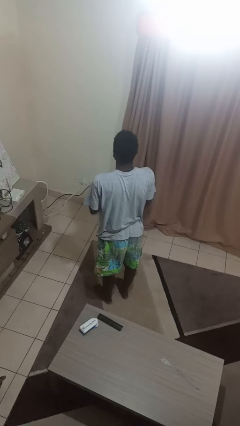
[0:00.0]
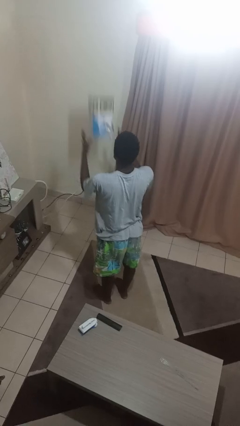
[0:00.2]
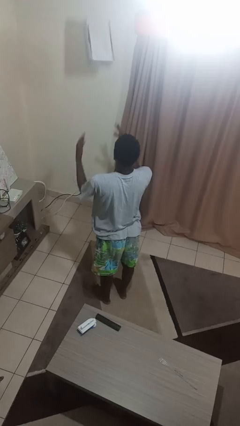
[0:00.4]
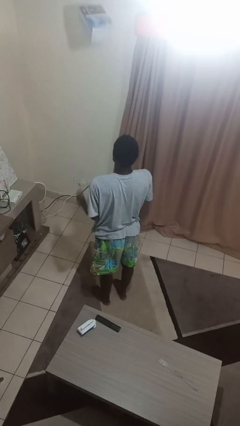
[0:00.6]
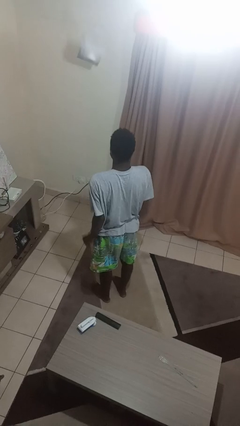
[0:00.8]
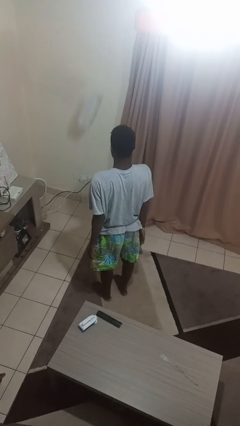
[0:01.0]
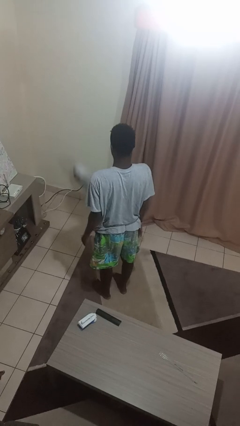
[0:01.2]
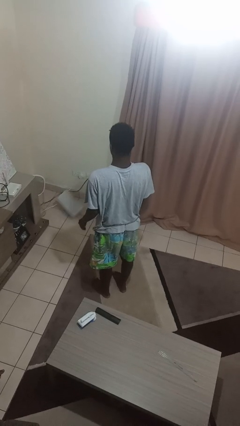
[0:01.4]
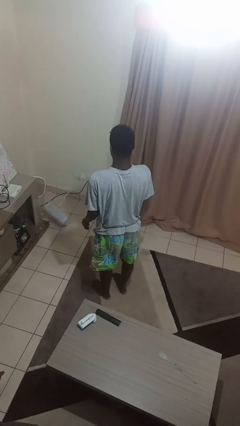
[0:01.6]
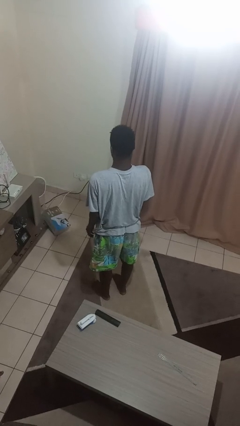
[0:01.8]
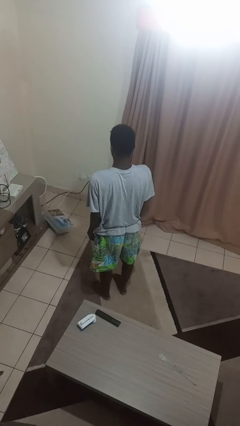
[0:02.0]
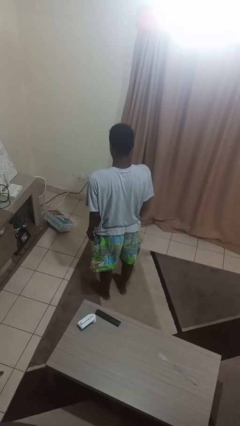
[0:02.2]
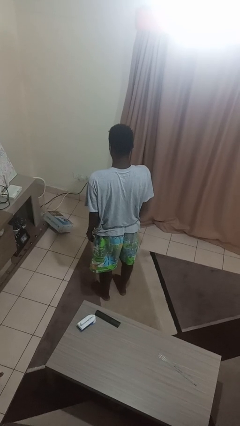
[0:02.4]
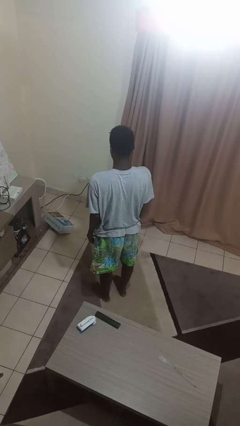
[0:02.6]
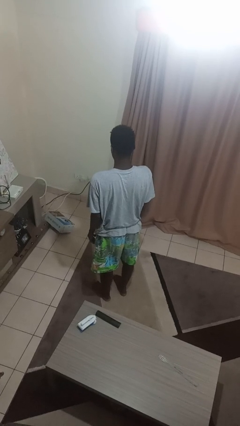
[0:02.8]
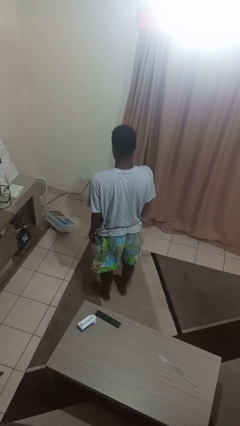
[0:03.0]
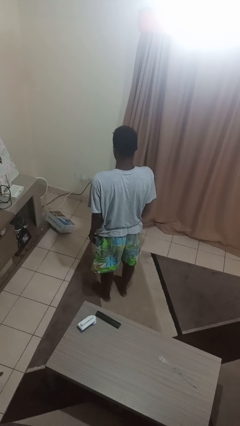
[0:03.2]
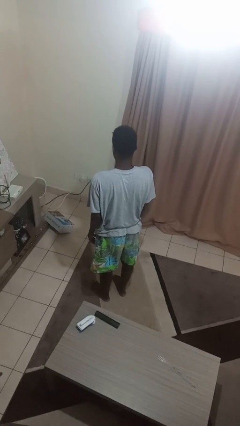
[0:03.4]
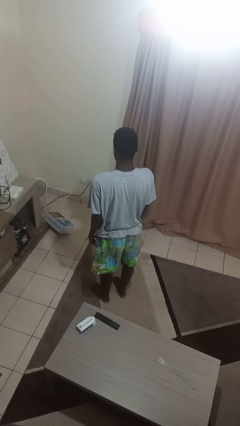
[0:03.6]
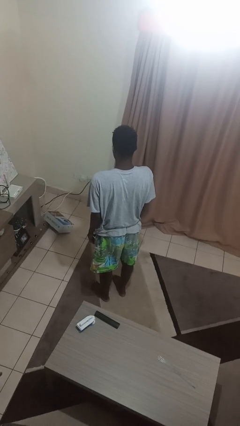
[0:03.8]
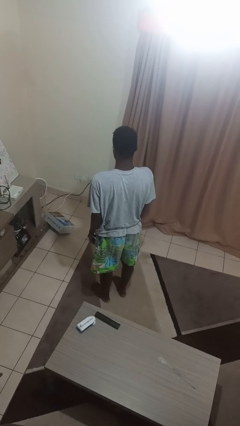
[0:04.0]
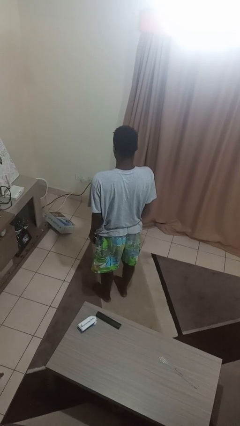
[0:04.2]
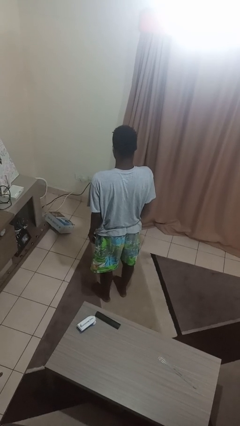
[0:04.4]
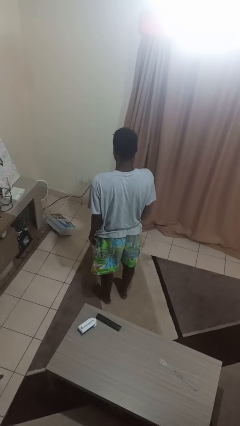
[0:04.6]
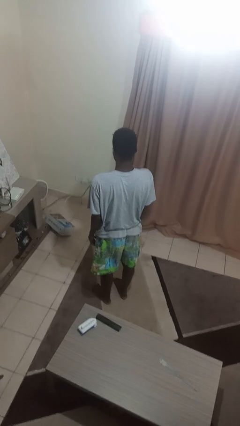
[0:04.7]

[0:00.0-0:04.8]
person throws object into air

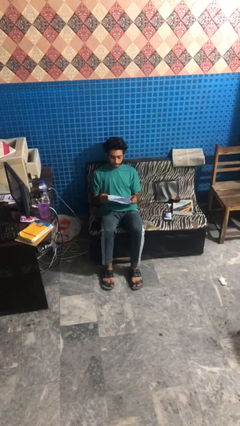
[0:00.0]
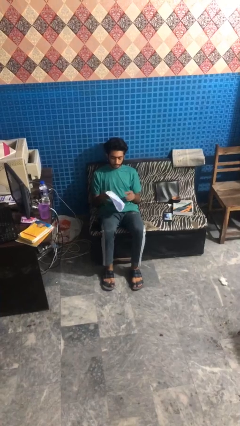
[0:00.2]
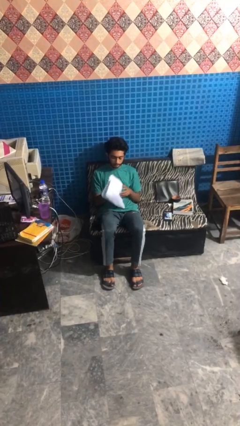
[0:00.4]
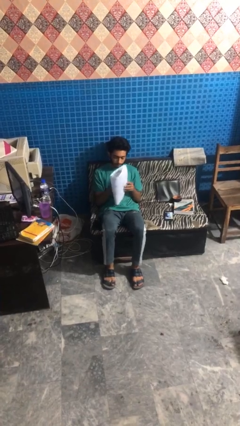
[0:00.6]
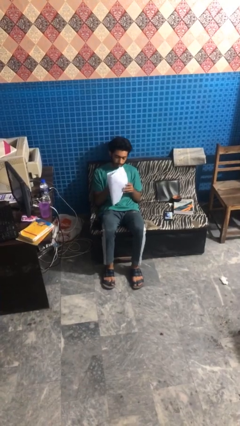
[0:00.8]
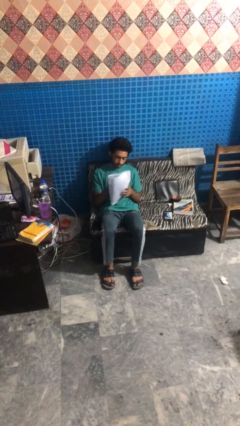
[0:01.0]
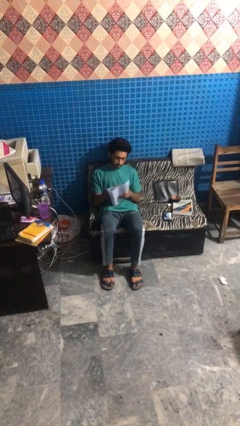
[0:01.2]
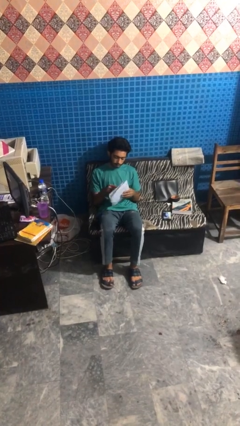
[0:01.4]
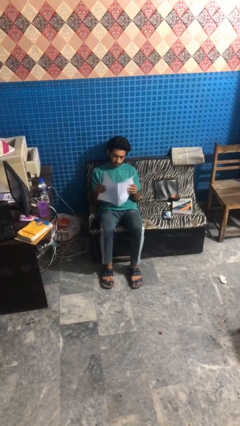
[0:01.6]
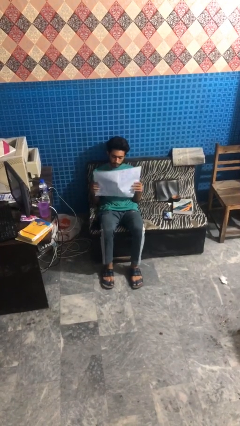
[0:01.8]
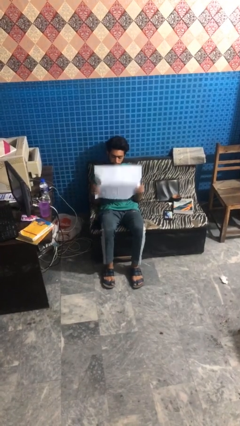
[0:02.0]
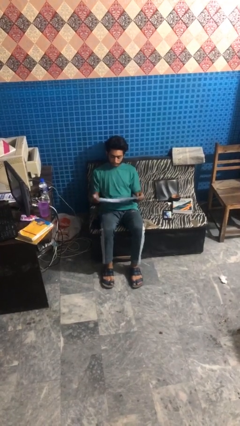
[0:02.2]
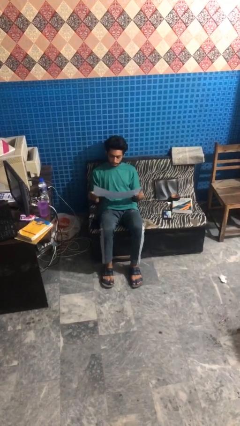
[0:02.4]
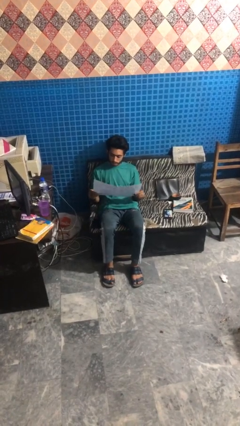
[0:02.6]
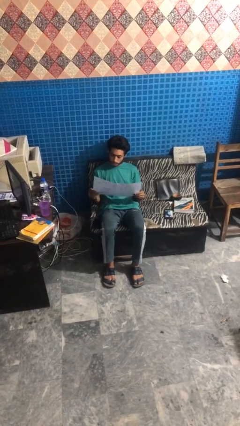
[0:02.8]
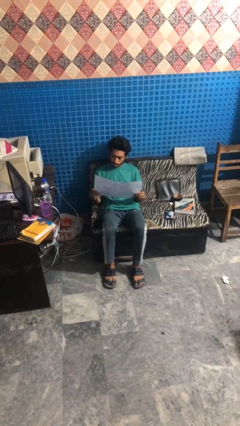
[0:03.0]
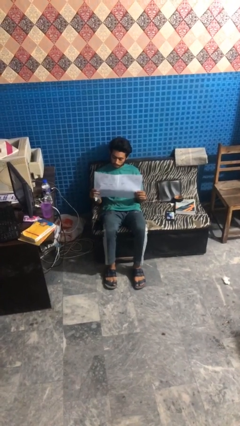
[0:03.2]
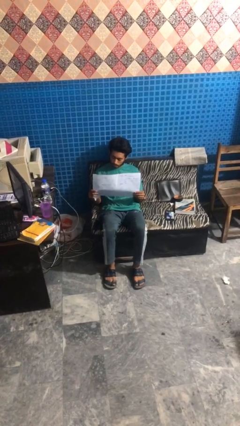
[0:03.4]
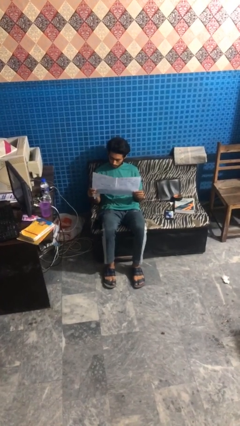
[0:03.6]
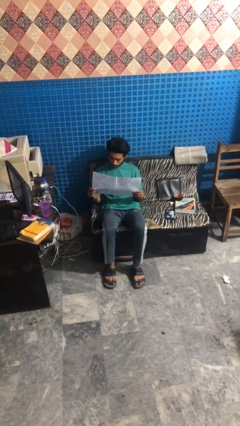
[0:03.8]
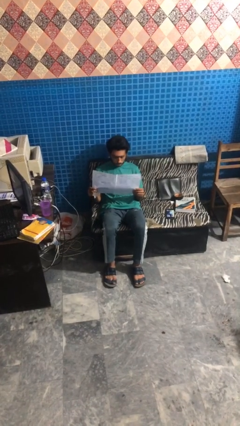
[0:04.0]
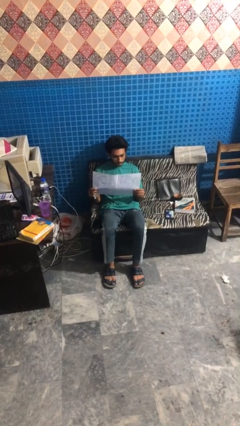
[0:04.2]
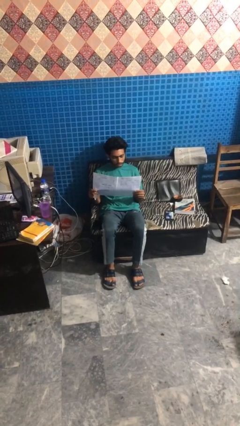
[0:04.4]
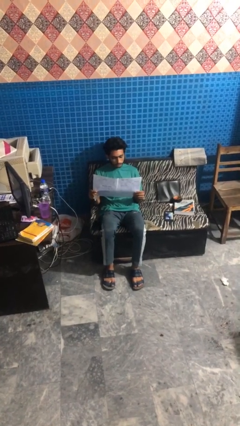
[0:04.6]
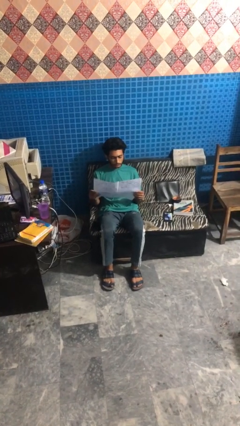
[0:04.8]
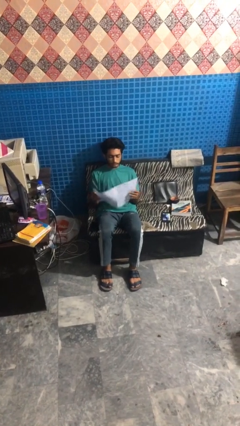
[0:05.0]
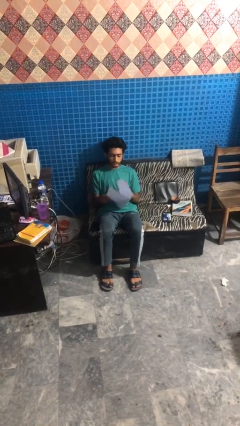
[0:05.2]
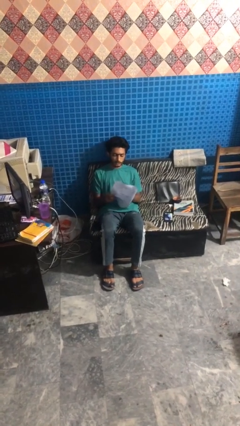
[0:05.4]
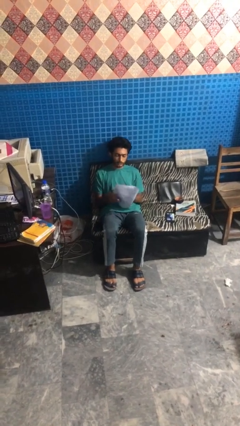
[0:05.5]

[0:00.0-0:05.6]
person reads newspaper

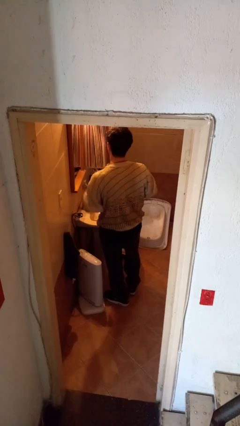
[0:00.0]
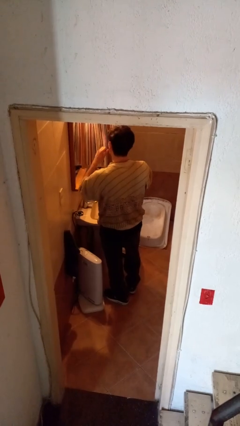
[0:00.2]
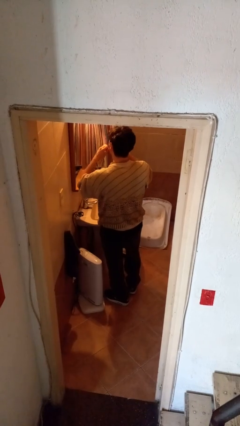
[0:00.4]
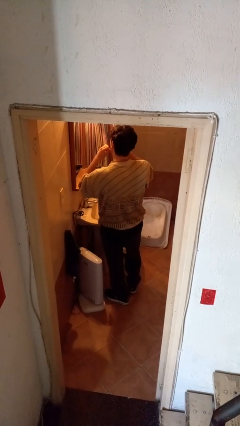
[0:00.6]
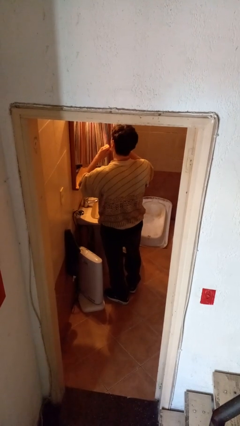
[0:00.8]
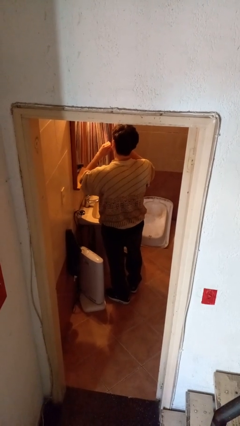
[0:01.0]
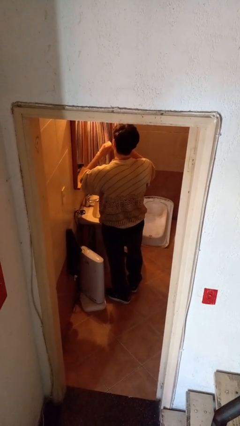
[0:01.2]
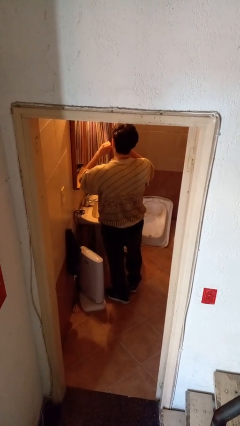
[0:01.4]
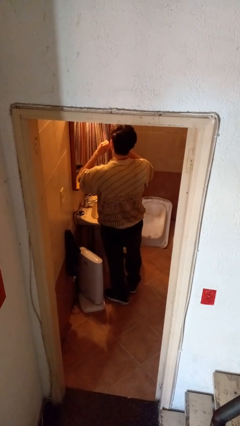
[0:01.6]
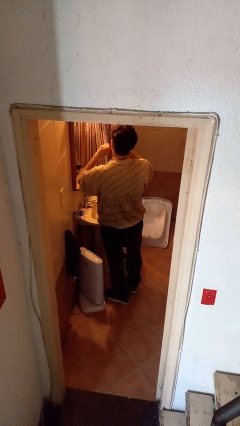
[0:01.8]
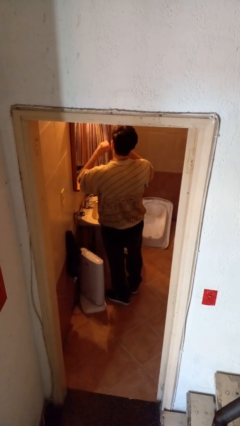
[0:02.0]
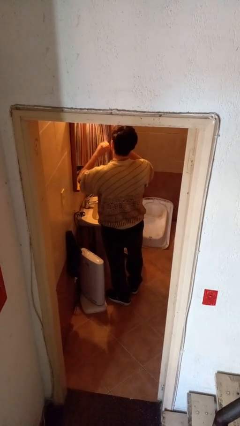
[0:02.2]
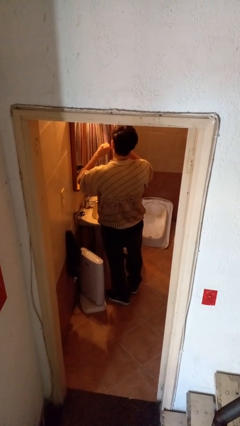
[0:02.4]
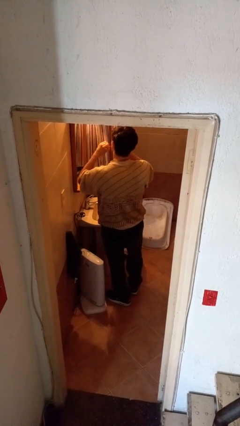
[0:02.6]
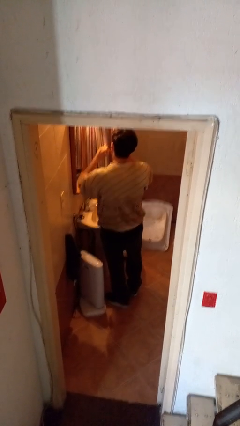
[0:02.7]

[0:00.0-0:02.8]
person flosses

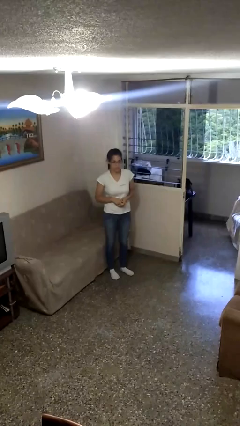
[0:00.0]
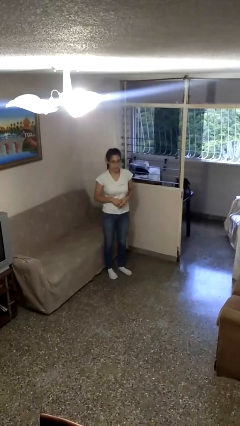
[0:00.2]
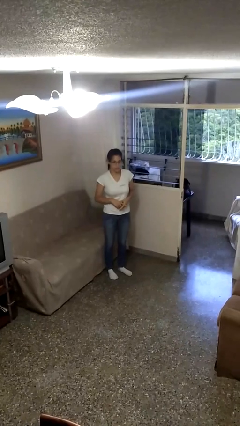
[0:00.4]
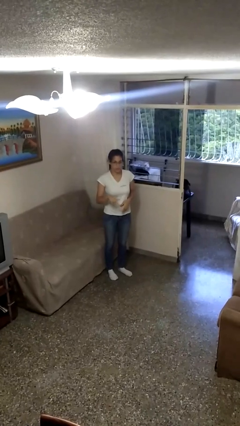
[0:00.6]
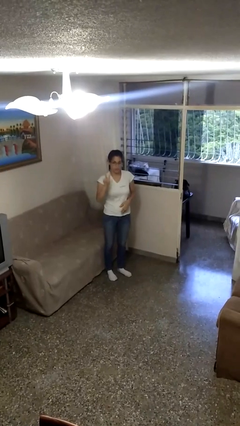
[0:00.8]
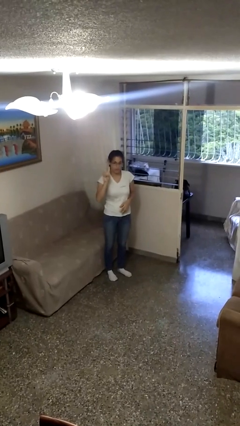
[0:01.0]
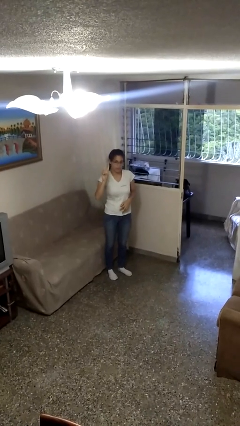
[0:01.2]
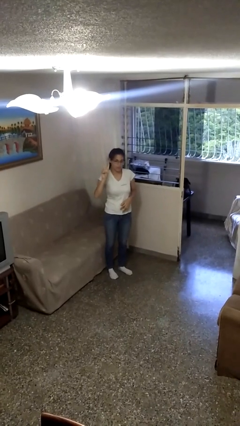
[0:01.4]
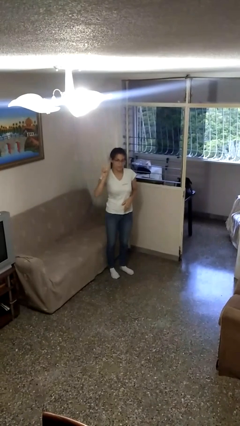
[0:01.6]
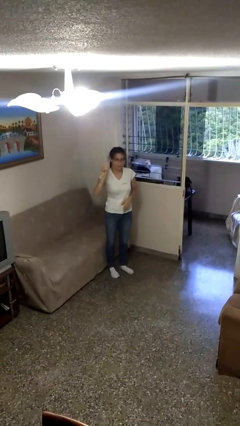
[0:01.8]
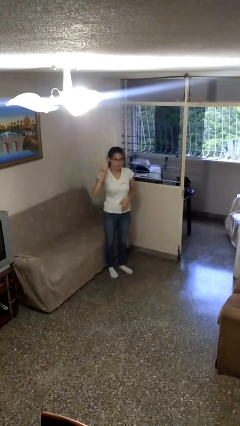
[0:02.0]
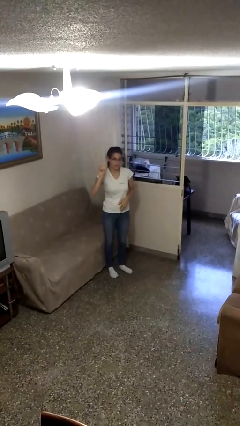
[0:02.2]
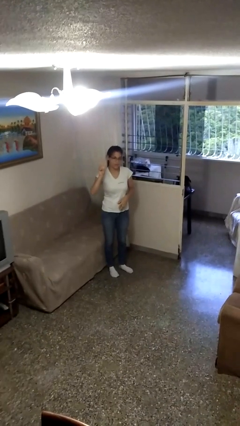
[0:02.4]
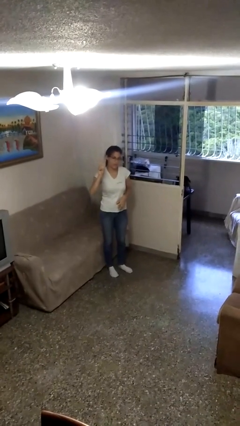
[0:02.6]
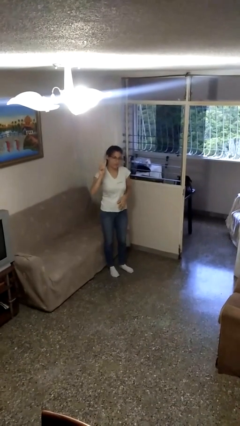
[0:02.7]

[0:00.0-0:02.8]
person gestures peace

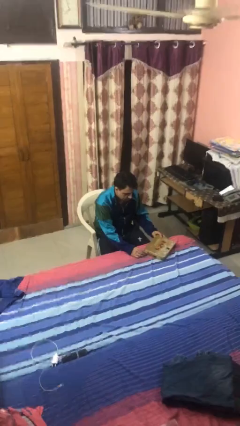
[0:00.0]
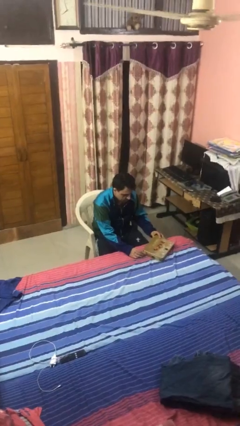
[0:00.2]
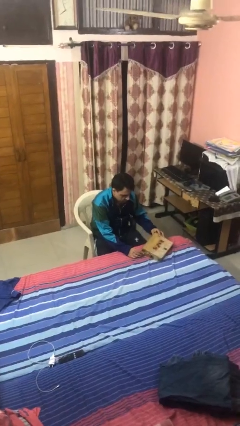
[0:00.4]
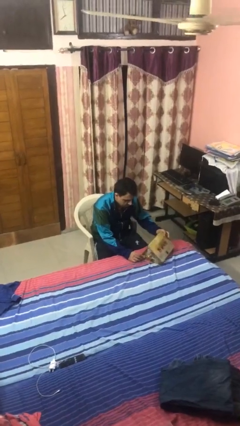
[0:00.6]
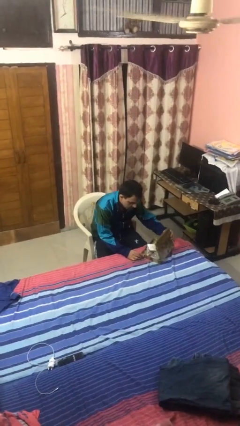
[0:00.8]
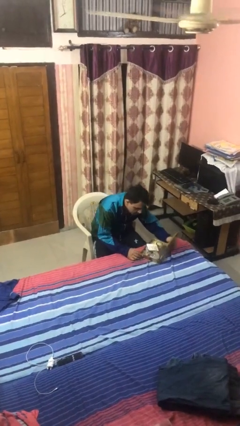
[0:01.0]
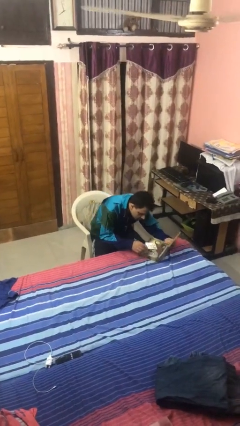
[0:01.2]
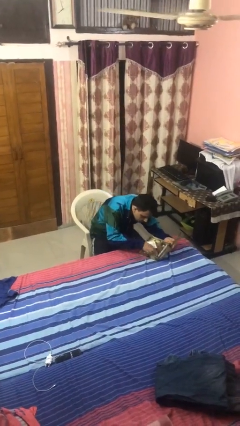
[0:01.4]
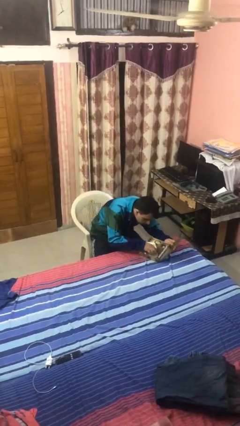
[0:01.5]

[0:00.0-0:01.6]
person opens jewelry box

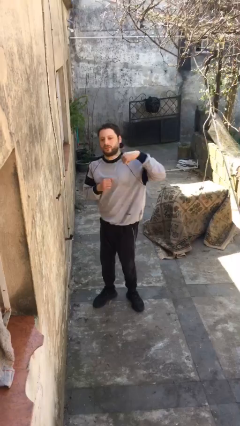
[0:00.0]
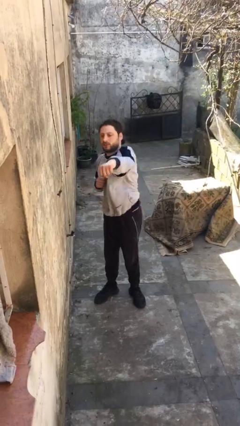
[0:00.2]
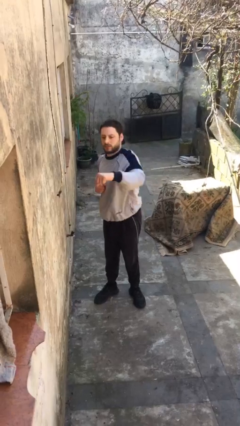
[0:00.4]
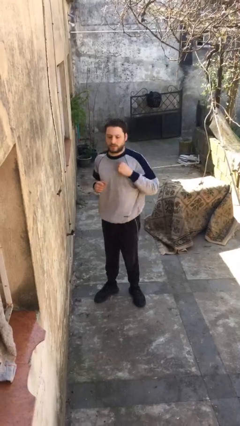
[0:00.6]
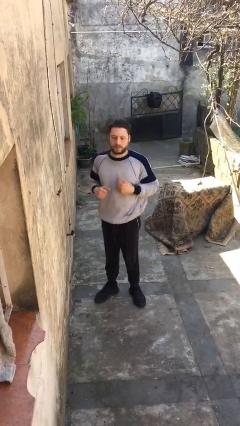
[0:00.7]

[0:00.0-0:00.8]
person punches
